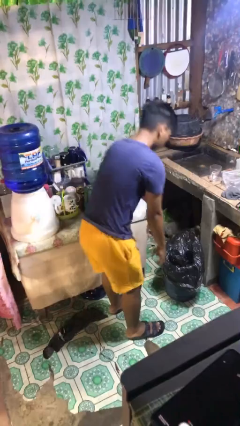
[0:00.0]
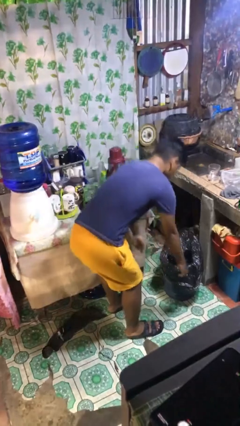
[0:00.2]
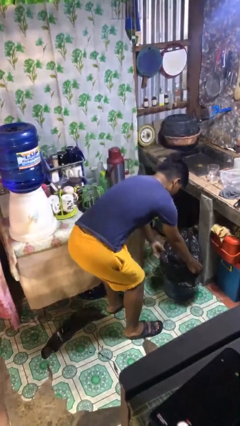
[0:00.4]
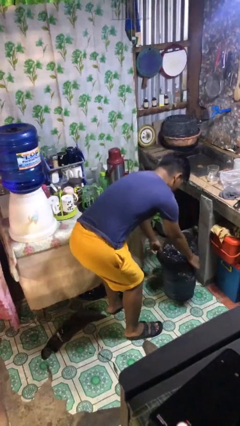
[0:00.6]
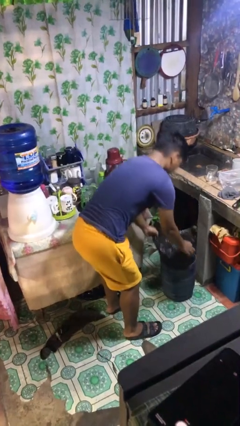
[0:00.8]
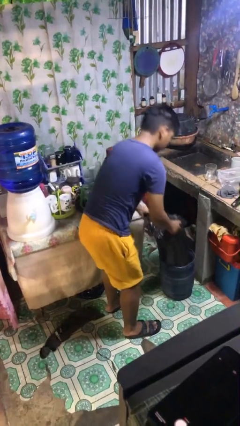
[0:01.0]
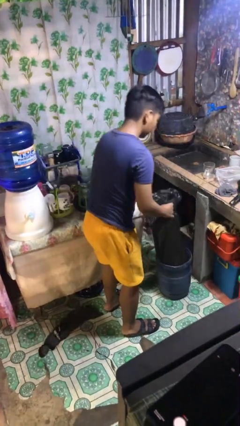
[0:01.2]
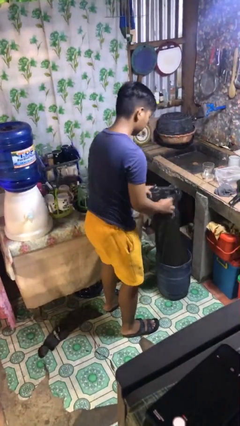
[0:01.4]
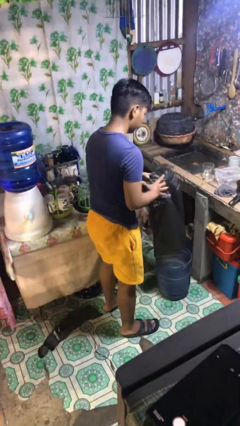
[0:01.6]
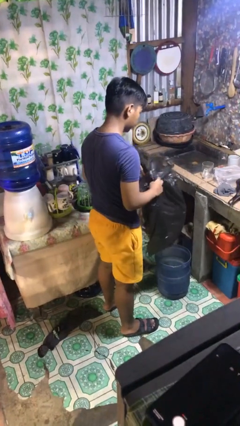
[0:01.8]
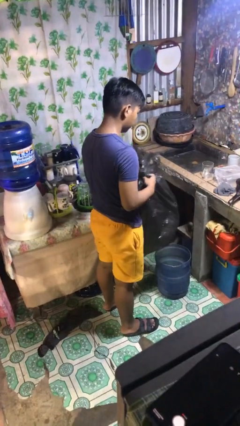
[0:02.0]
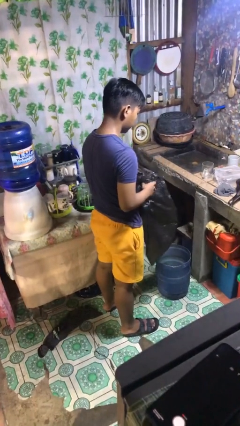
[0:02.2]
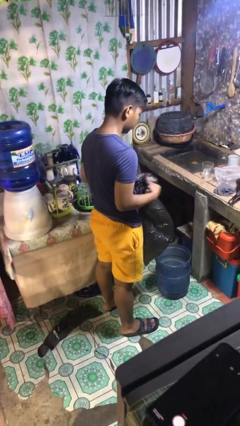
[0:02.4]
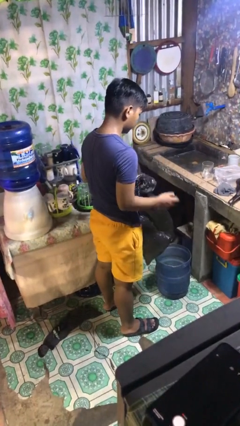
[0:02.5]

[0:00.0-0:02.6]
person removes trashbag from trashcan

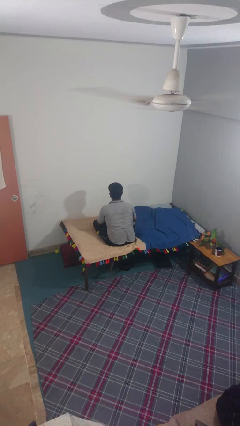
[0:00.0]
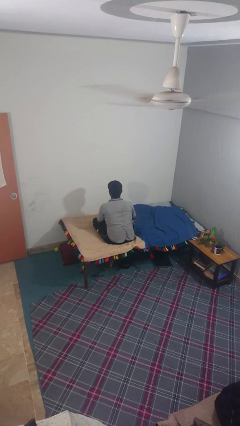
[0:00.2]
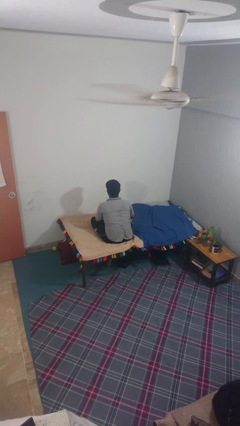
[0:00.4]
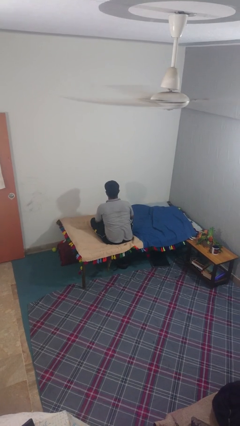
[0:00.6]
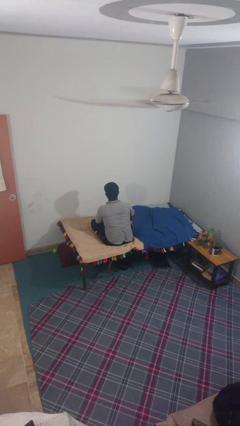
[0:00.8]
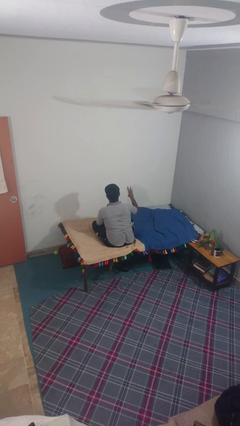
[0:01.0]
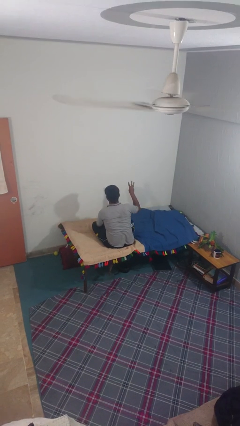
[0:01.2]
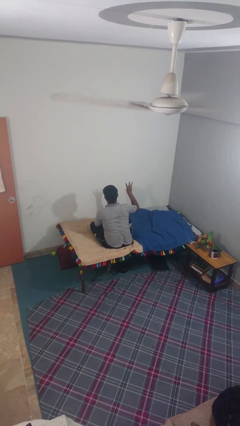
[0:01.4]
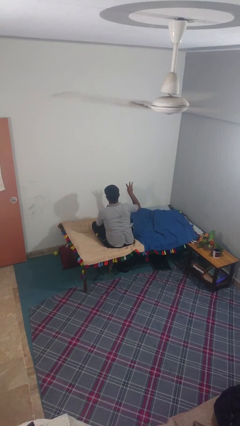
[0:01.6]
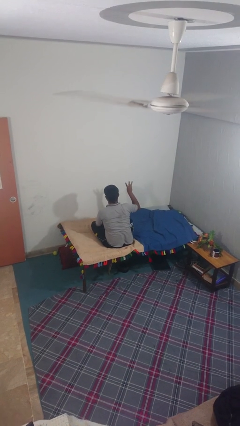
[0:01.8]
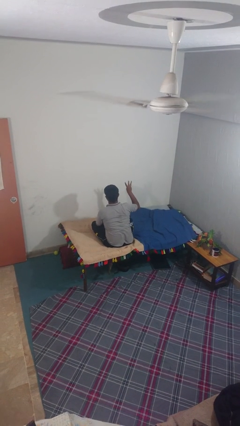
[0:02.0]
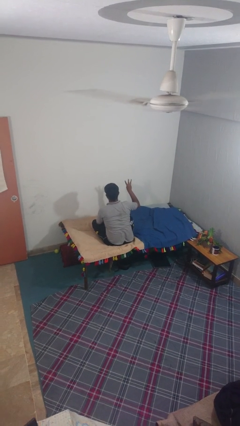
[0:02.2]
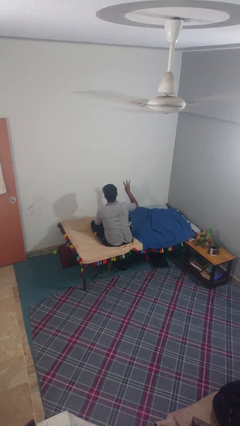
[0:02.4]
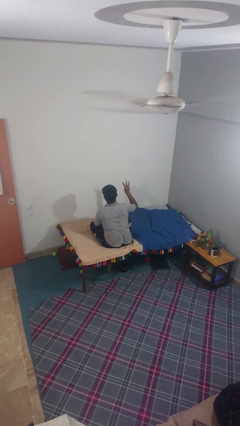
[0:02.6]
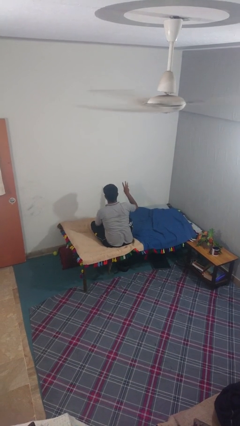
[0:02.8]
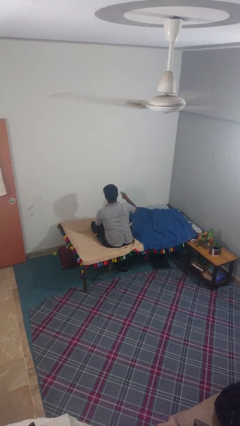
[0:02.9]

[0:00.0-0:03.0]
person gestures number three

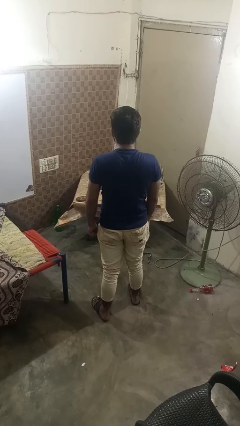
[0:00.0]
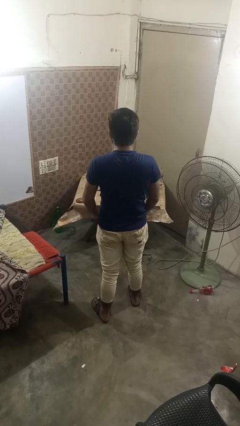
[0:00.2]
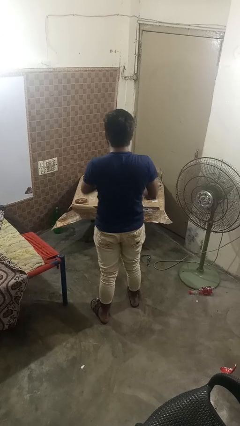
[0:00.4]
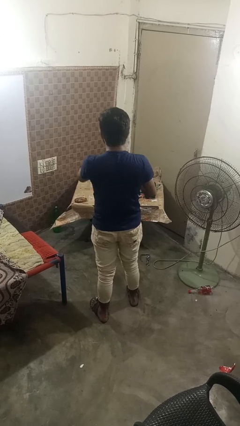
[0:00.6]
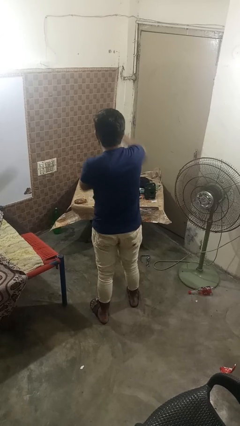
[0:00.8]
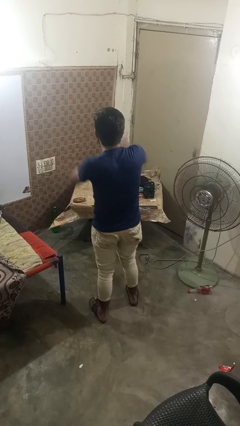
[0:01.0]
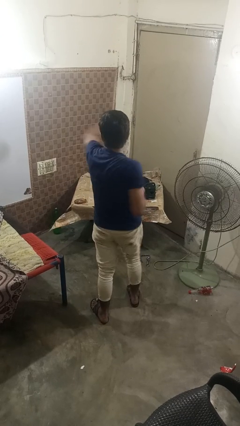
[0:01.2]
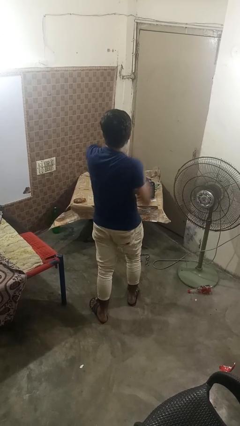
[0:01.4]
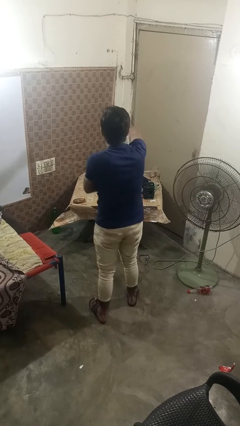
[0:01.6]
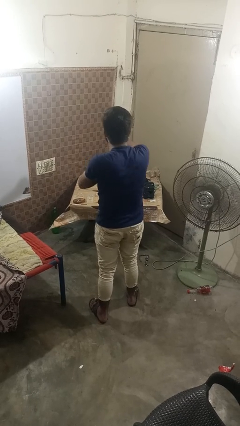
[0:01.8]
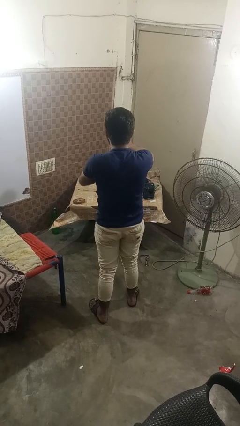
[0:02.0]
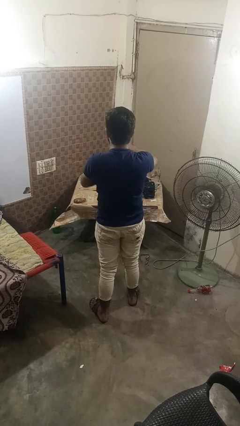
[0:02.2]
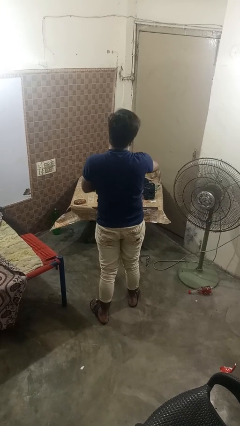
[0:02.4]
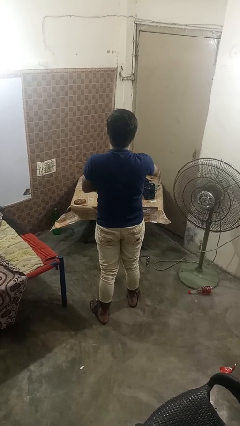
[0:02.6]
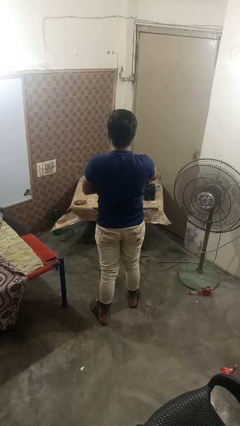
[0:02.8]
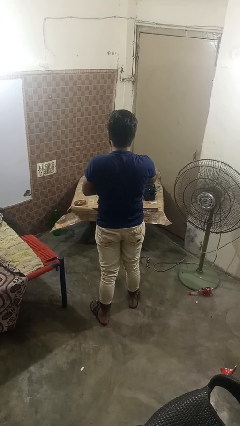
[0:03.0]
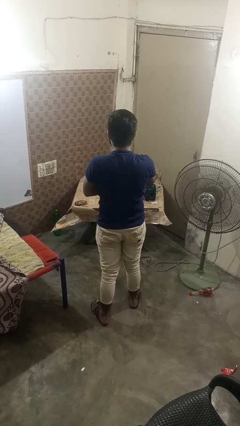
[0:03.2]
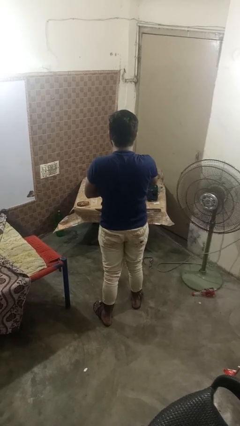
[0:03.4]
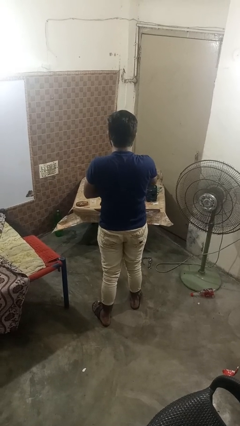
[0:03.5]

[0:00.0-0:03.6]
person punches

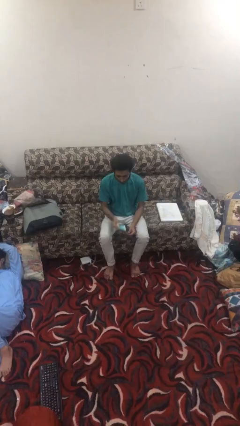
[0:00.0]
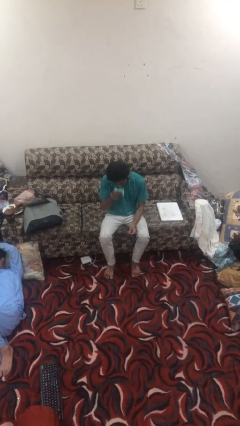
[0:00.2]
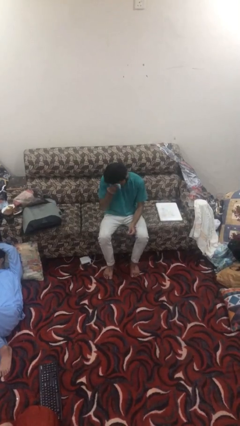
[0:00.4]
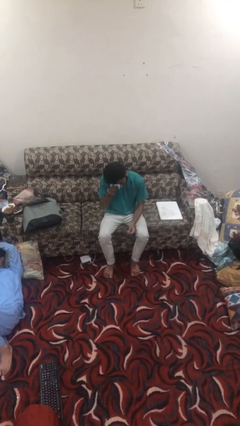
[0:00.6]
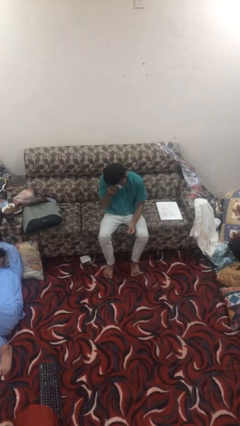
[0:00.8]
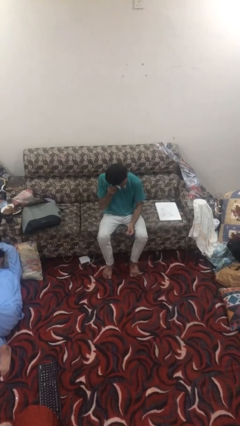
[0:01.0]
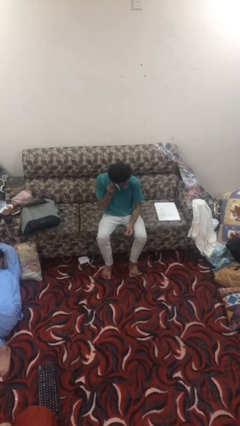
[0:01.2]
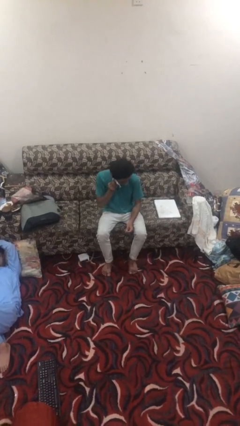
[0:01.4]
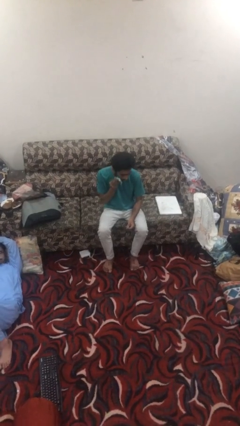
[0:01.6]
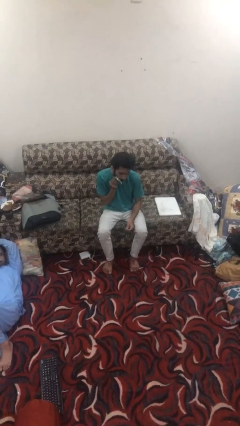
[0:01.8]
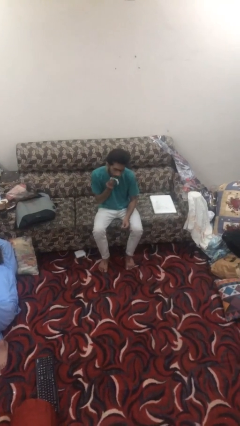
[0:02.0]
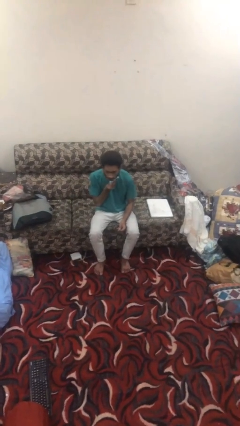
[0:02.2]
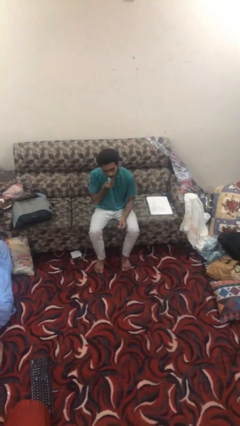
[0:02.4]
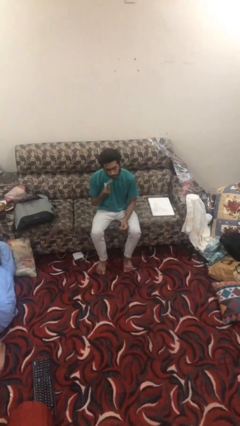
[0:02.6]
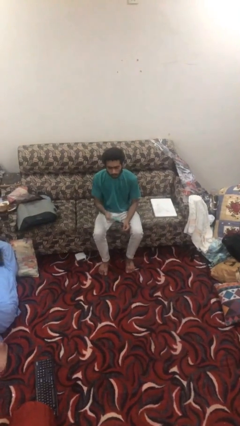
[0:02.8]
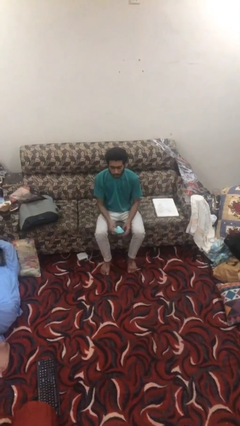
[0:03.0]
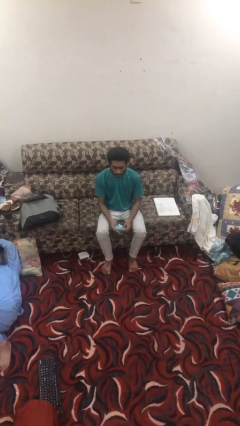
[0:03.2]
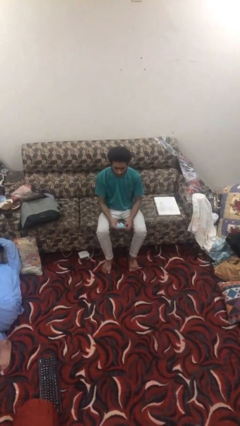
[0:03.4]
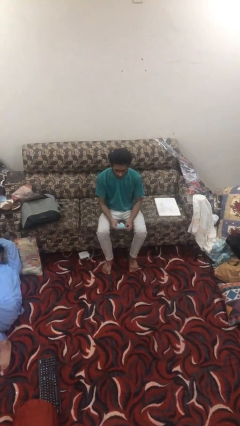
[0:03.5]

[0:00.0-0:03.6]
person wipes mouth with napkin

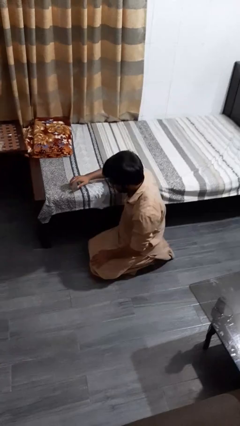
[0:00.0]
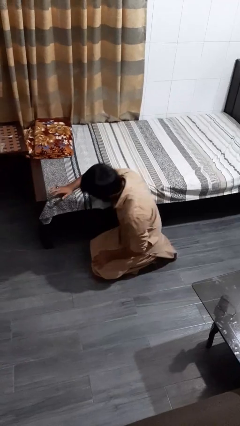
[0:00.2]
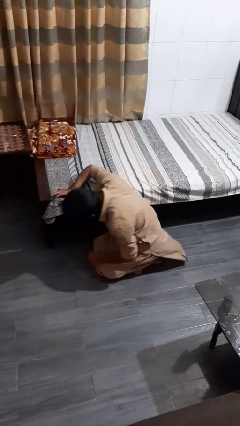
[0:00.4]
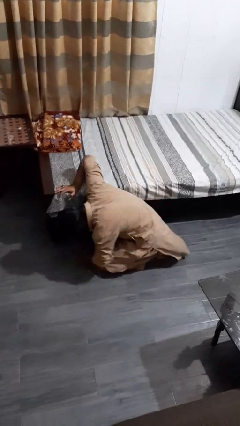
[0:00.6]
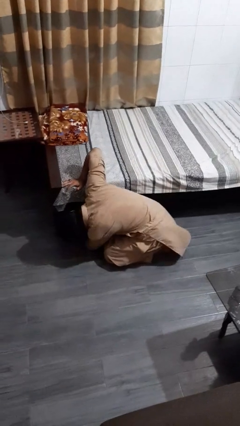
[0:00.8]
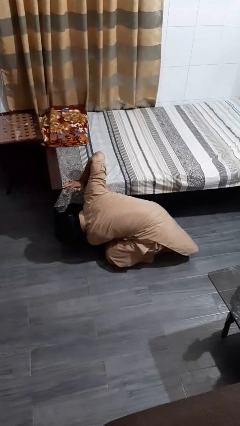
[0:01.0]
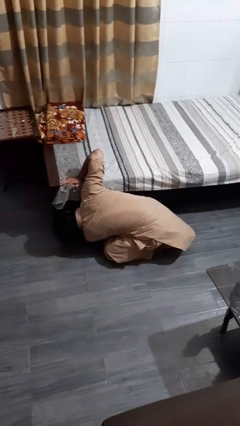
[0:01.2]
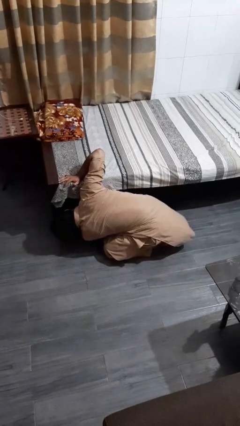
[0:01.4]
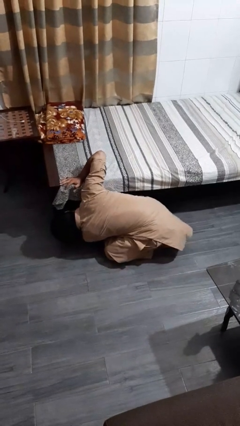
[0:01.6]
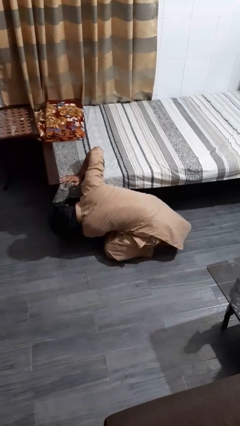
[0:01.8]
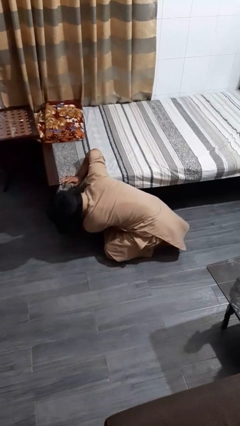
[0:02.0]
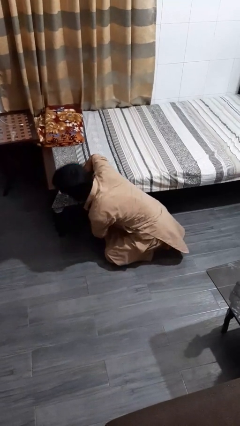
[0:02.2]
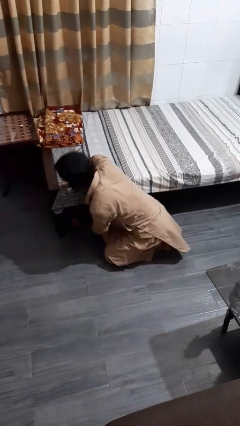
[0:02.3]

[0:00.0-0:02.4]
person searches under bed

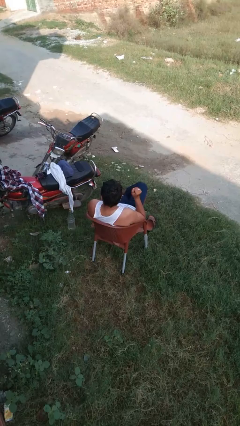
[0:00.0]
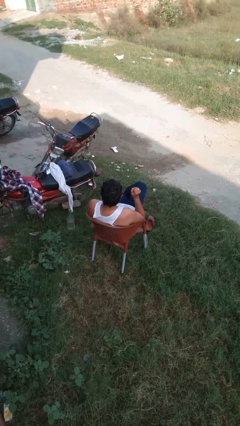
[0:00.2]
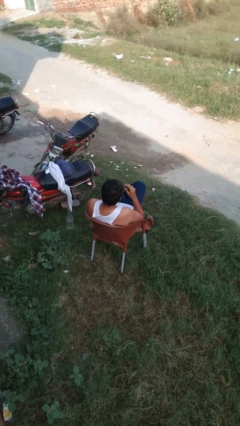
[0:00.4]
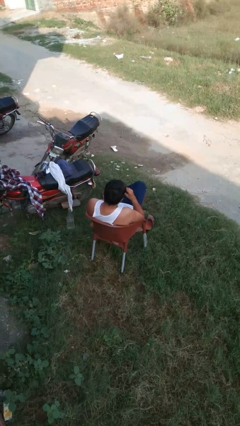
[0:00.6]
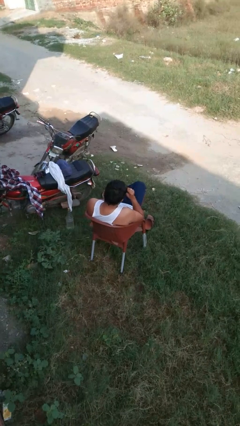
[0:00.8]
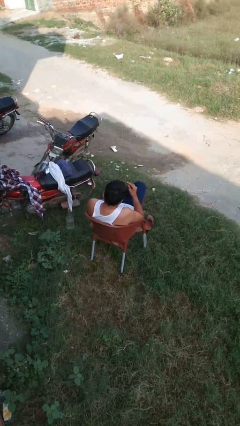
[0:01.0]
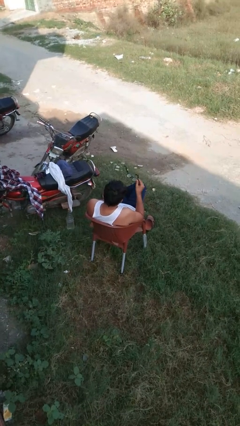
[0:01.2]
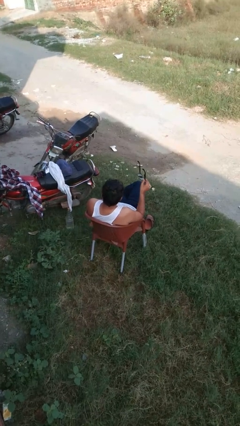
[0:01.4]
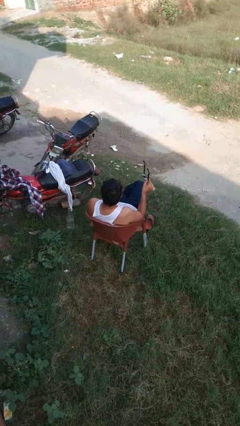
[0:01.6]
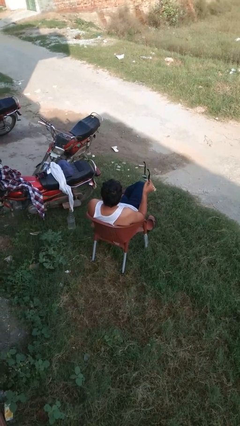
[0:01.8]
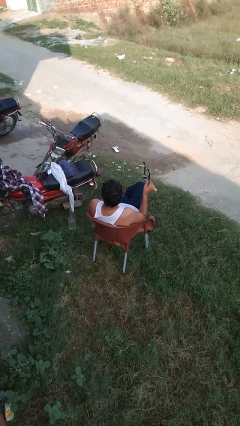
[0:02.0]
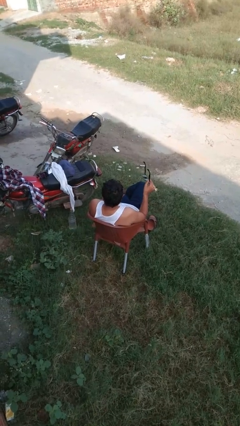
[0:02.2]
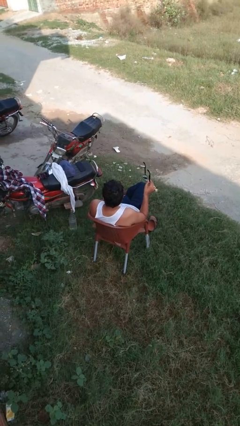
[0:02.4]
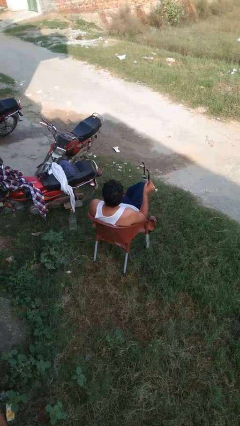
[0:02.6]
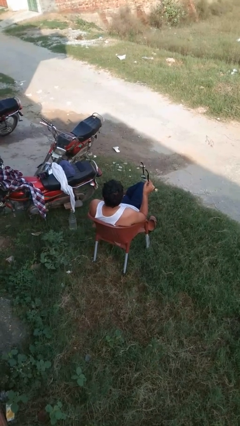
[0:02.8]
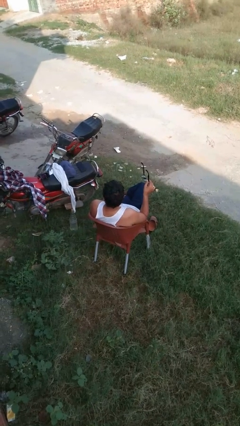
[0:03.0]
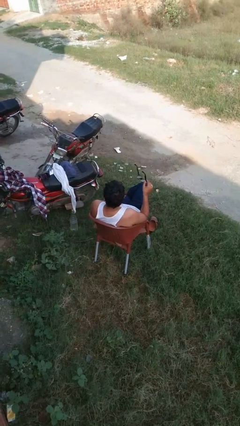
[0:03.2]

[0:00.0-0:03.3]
person takes off glasses
